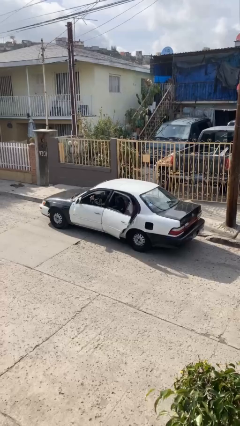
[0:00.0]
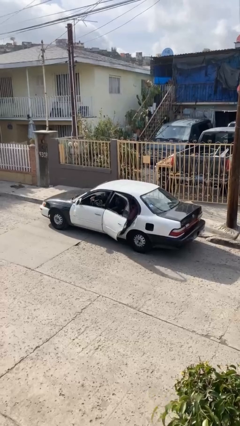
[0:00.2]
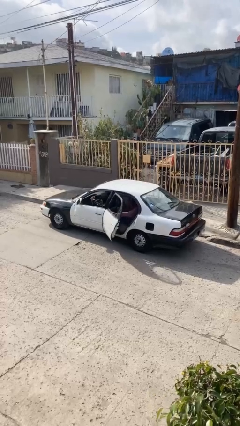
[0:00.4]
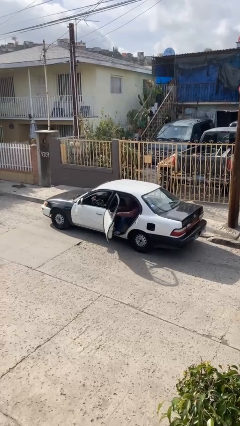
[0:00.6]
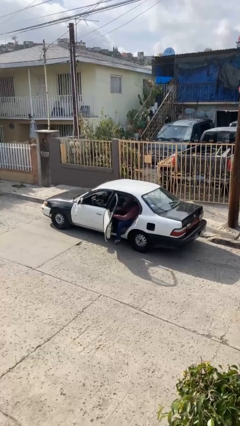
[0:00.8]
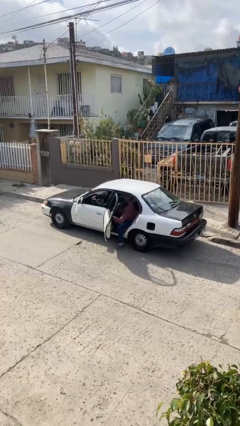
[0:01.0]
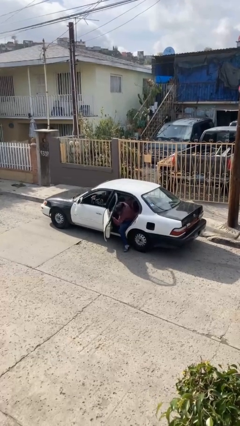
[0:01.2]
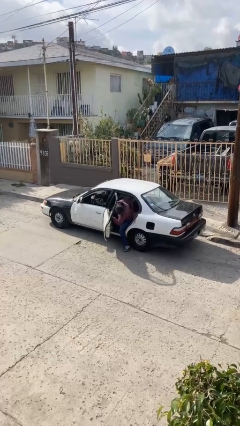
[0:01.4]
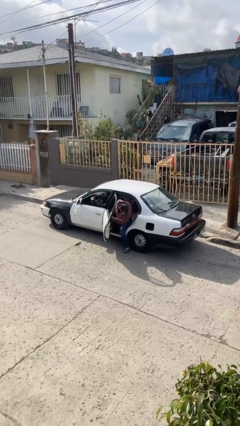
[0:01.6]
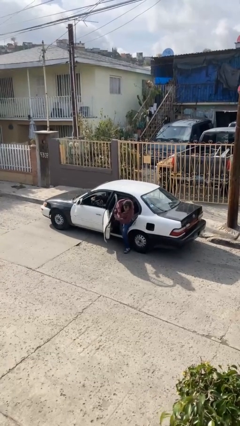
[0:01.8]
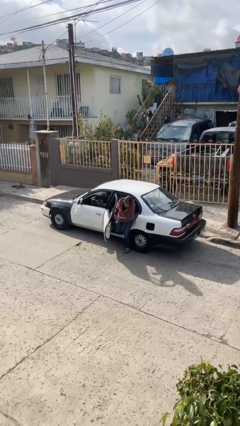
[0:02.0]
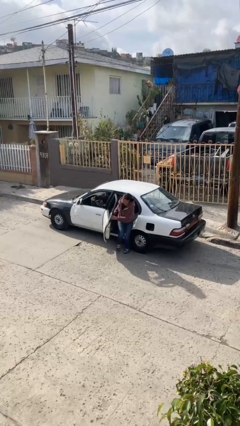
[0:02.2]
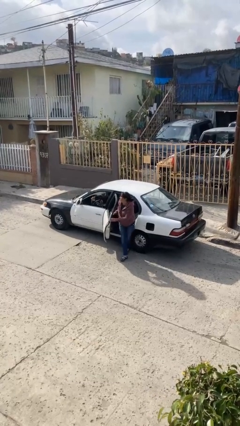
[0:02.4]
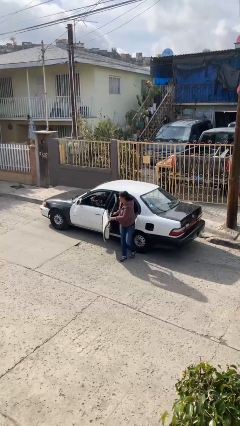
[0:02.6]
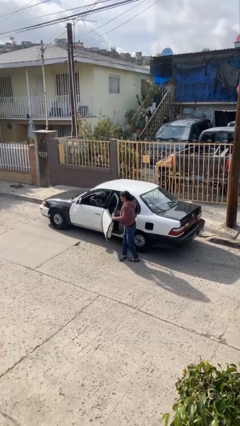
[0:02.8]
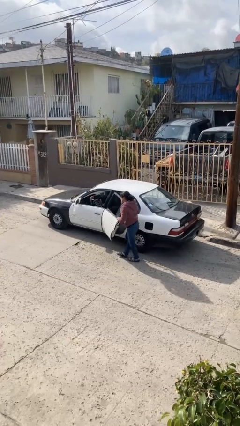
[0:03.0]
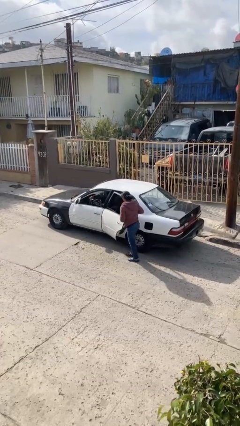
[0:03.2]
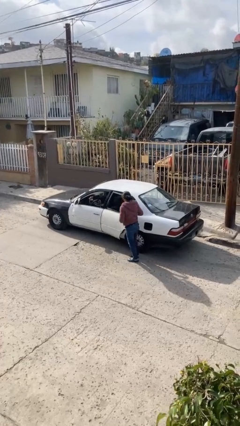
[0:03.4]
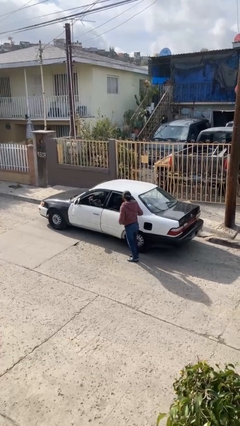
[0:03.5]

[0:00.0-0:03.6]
car drops off person

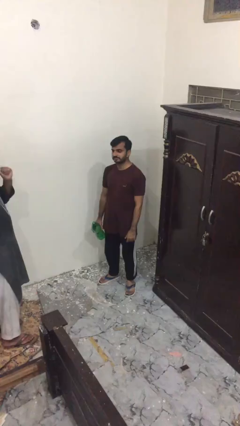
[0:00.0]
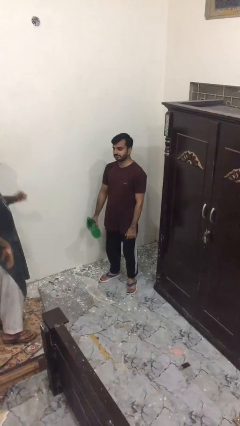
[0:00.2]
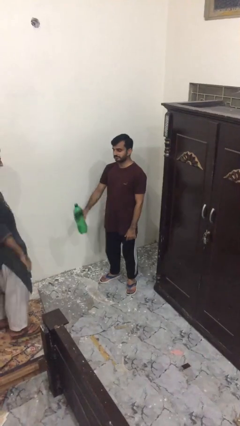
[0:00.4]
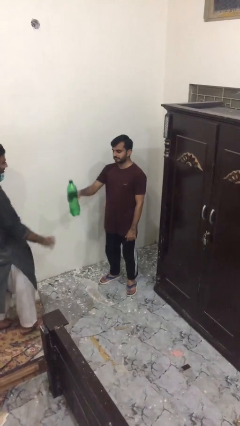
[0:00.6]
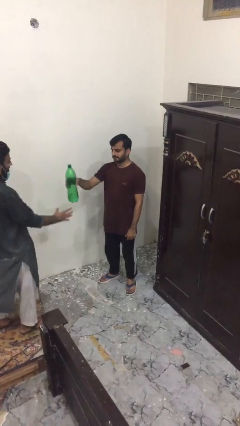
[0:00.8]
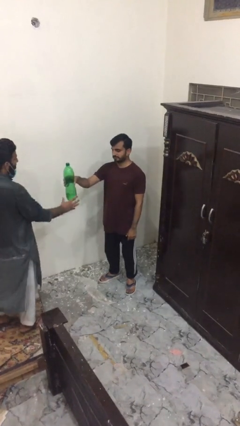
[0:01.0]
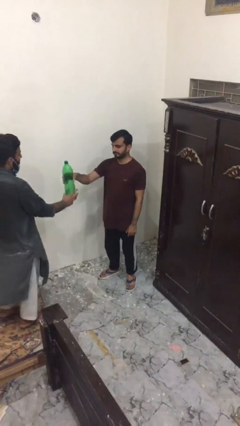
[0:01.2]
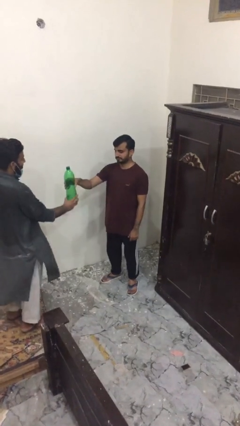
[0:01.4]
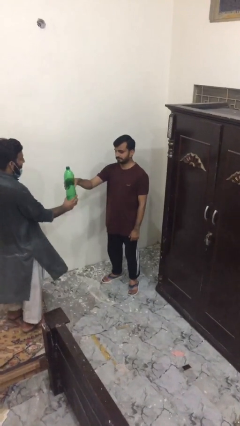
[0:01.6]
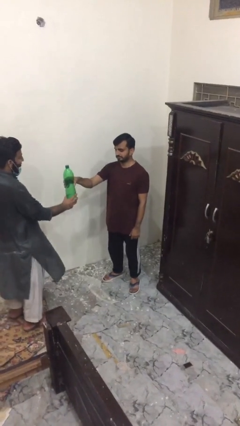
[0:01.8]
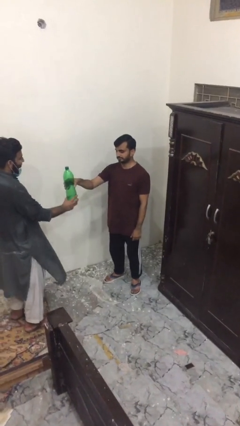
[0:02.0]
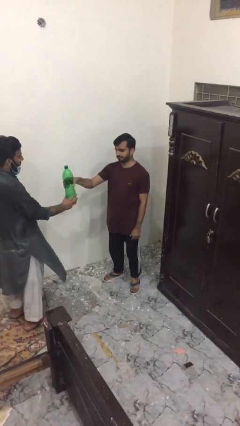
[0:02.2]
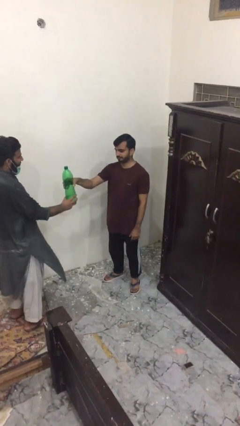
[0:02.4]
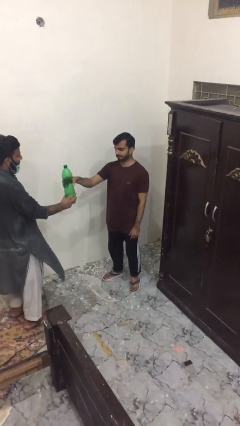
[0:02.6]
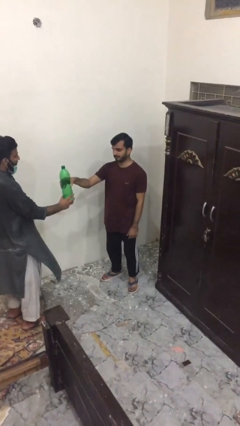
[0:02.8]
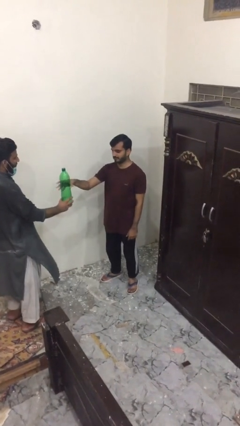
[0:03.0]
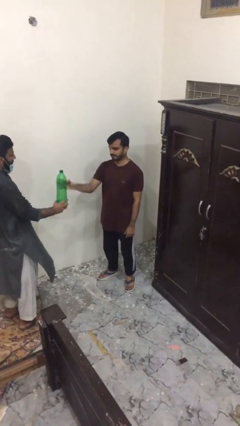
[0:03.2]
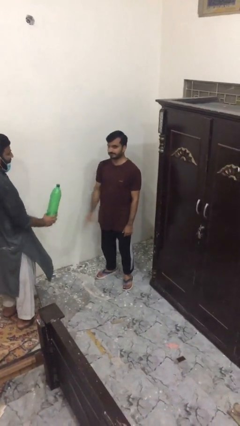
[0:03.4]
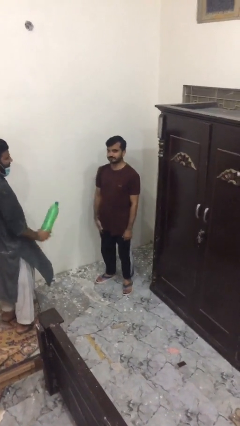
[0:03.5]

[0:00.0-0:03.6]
person transfers object to person

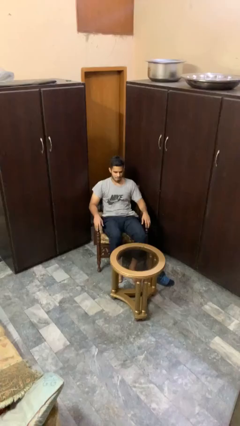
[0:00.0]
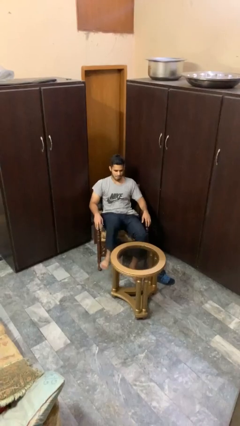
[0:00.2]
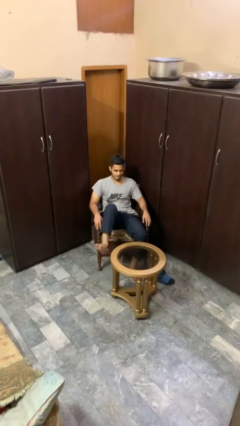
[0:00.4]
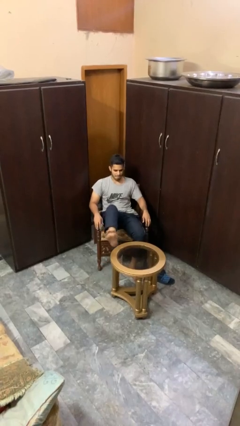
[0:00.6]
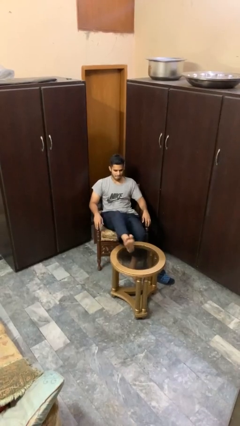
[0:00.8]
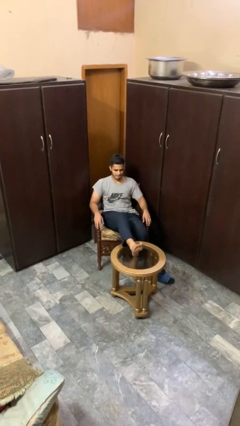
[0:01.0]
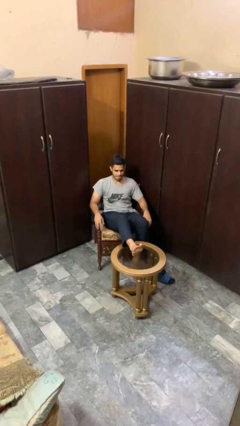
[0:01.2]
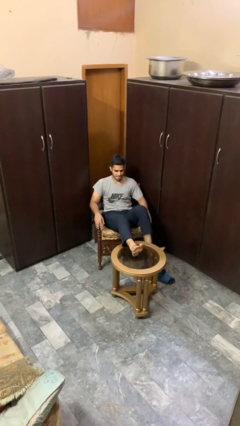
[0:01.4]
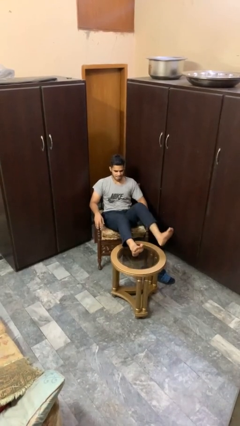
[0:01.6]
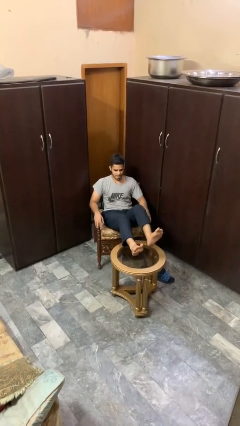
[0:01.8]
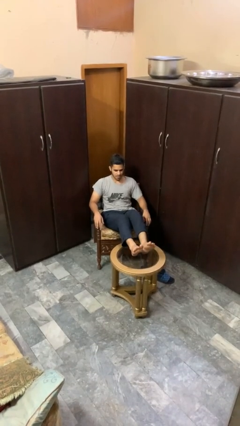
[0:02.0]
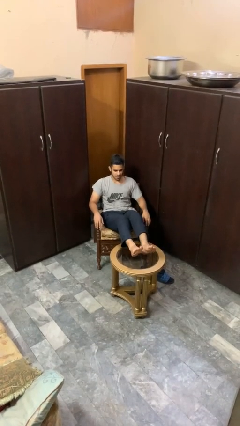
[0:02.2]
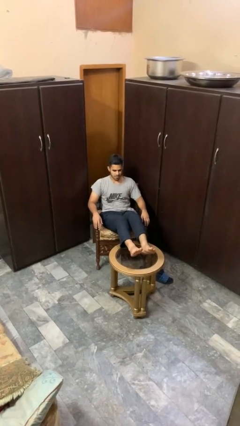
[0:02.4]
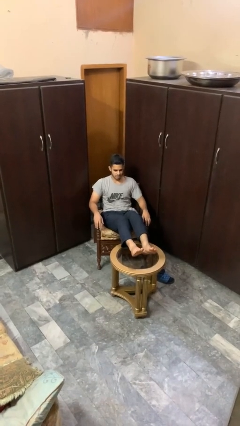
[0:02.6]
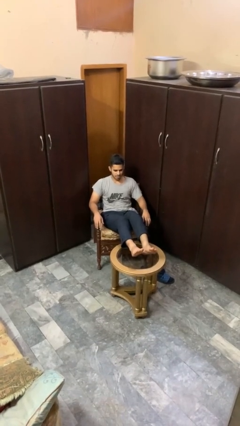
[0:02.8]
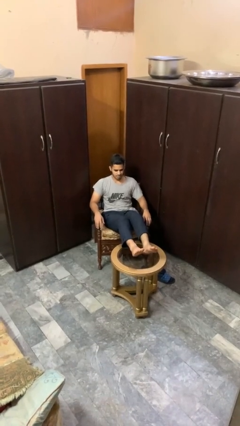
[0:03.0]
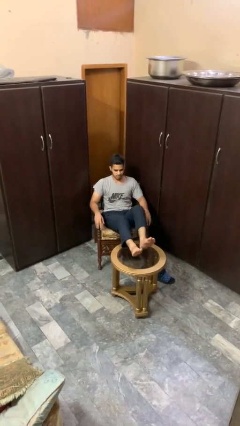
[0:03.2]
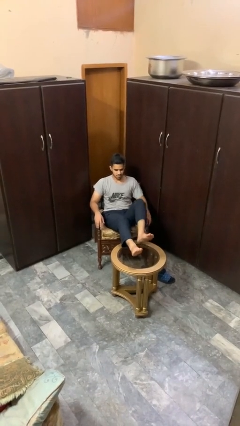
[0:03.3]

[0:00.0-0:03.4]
person puts feet up

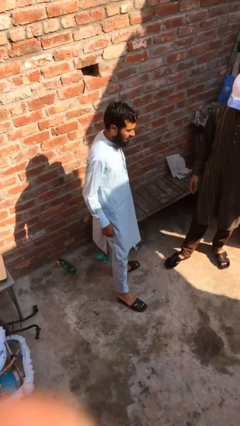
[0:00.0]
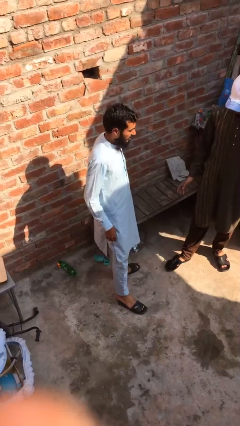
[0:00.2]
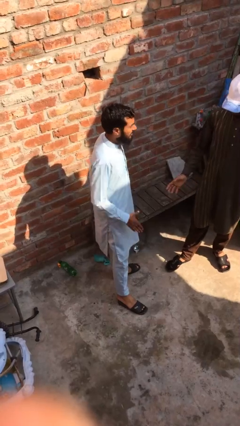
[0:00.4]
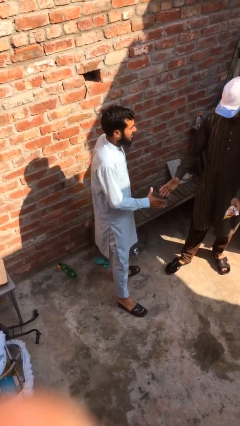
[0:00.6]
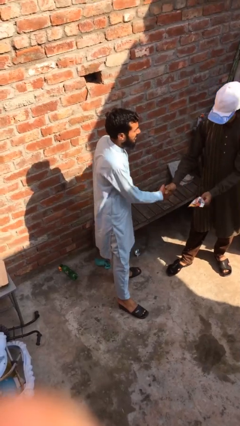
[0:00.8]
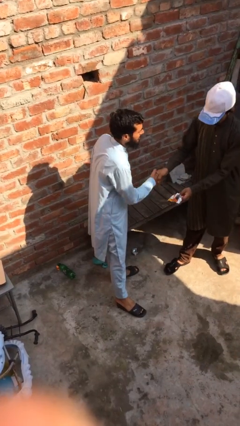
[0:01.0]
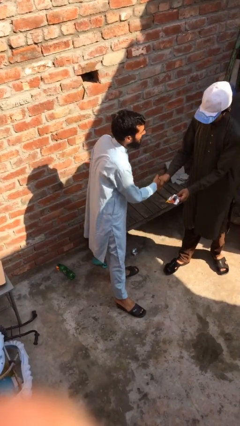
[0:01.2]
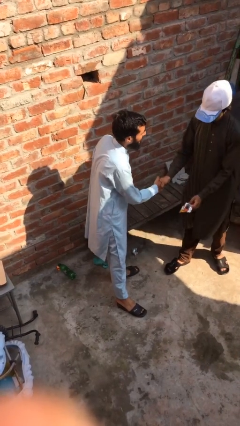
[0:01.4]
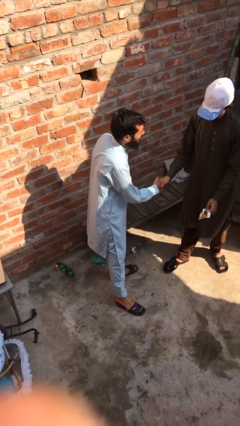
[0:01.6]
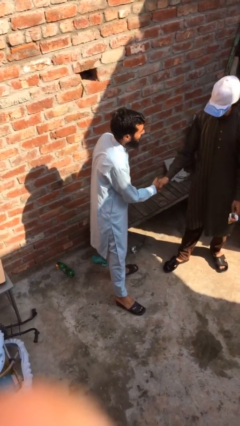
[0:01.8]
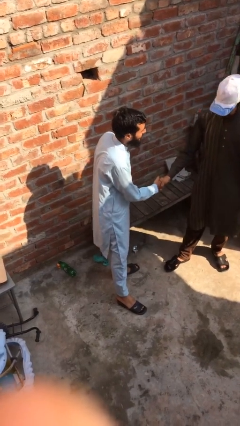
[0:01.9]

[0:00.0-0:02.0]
person shakes hand

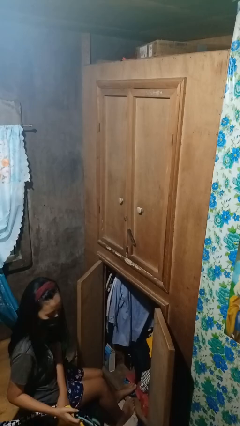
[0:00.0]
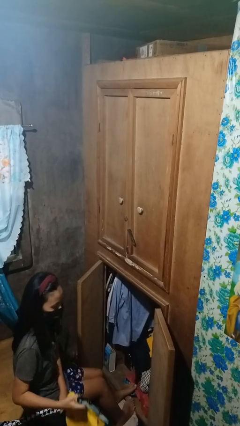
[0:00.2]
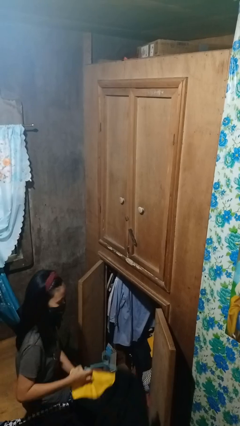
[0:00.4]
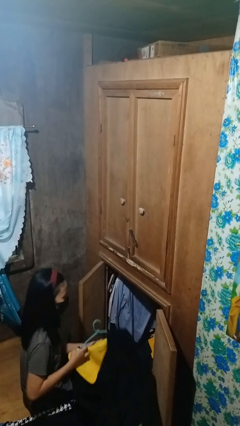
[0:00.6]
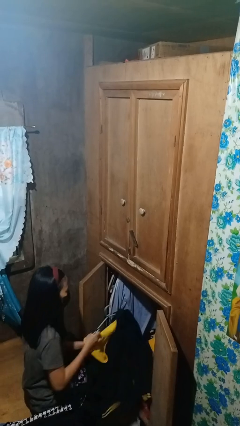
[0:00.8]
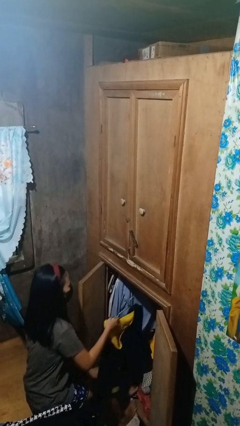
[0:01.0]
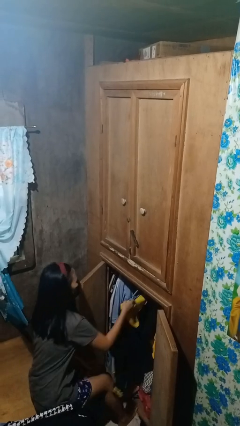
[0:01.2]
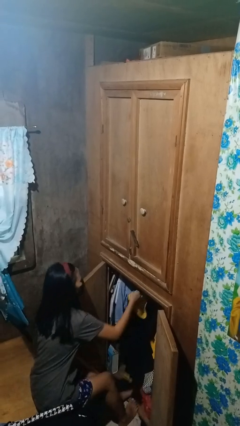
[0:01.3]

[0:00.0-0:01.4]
person puts clothes into closet

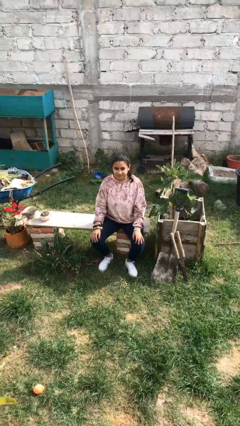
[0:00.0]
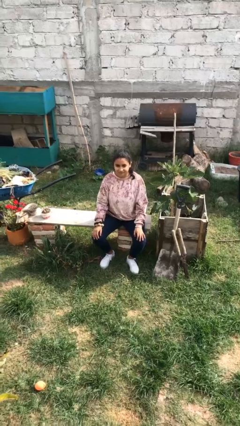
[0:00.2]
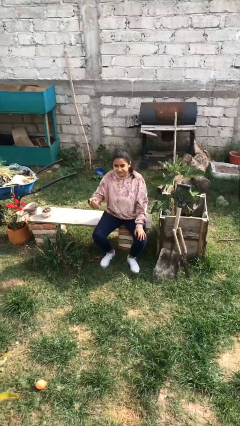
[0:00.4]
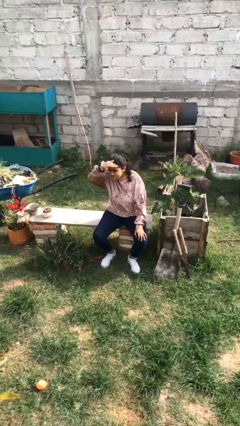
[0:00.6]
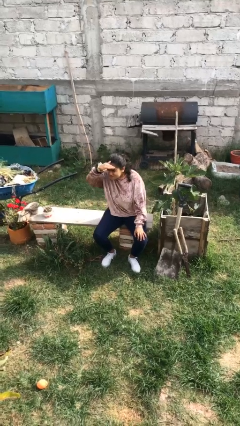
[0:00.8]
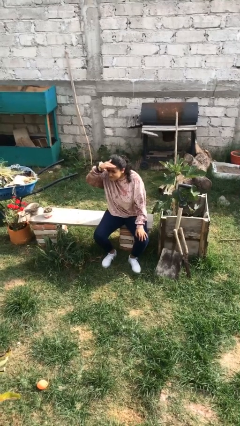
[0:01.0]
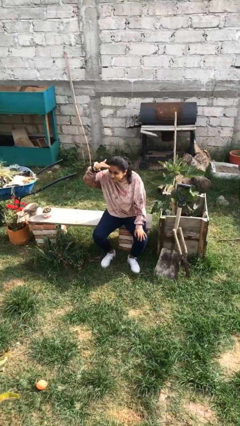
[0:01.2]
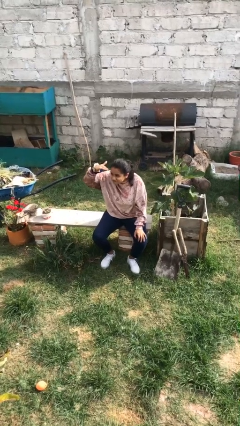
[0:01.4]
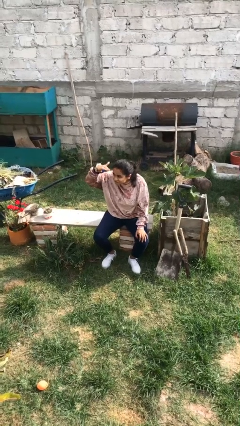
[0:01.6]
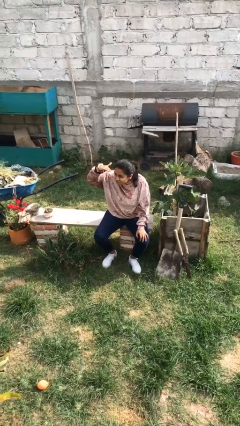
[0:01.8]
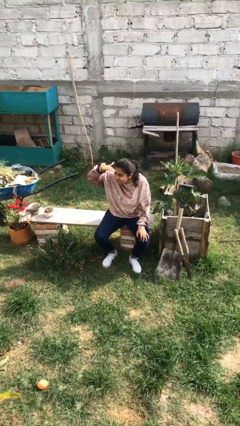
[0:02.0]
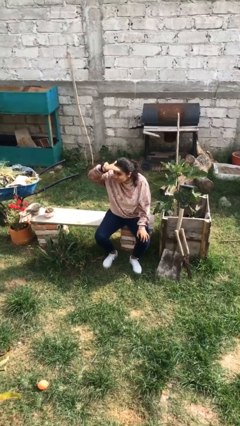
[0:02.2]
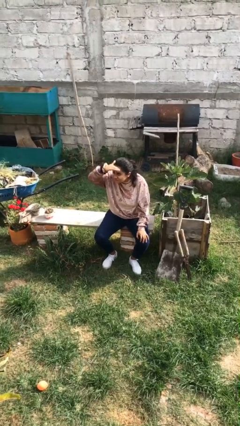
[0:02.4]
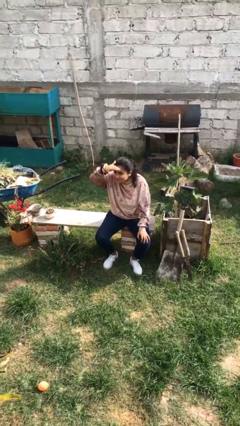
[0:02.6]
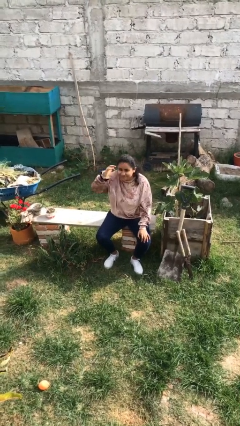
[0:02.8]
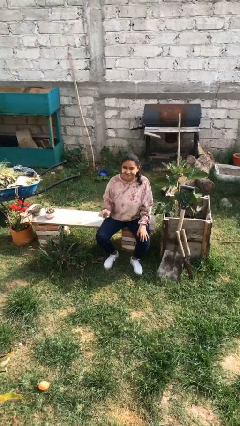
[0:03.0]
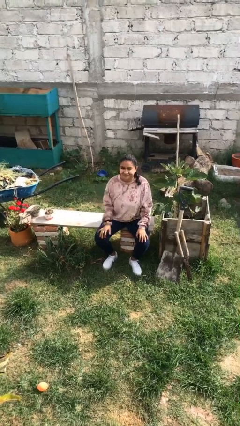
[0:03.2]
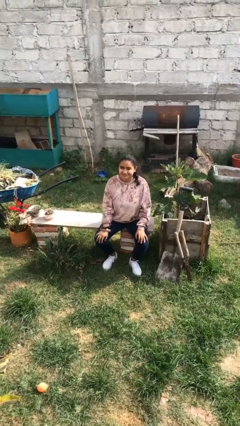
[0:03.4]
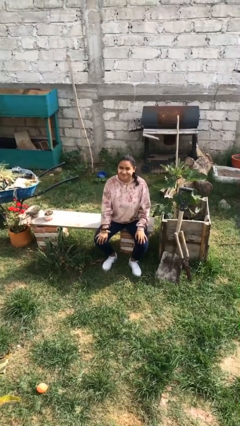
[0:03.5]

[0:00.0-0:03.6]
person shades eyes
